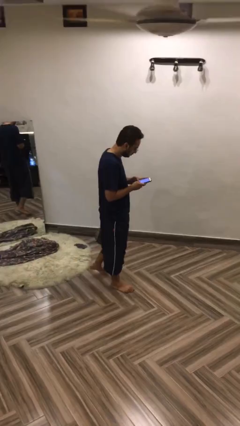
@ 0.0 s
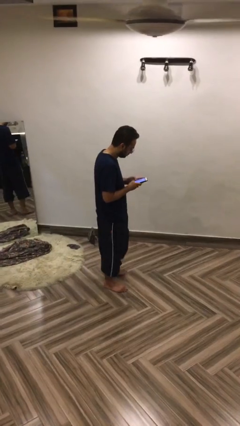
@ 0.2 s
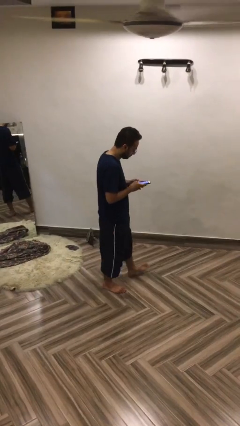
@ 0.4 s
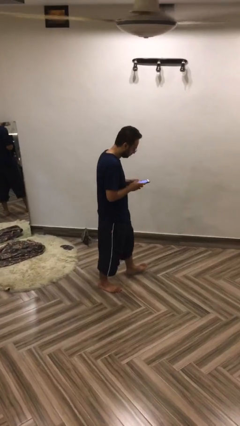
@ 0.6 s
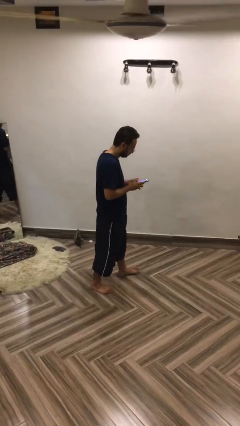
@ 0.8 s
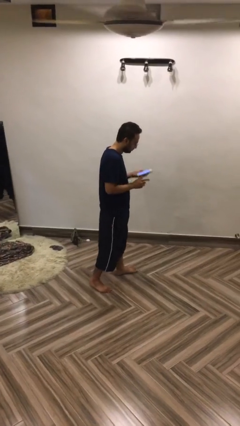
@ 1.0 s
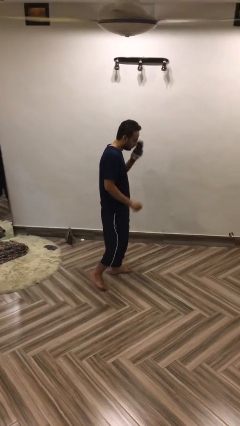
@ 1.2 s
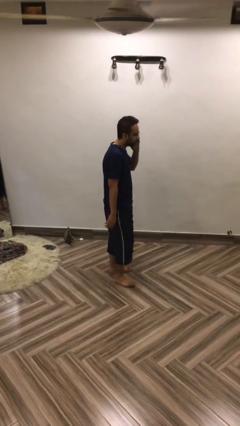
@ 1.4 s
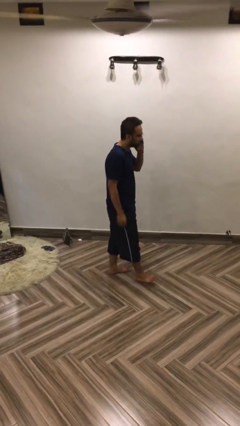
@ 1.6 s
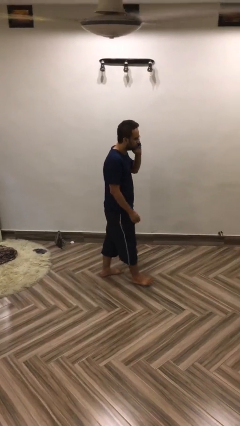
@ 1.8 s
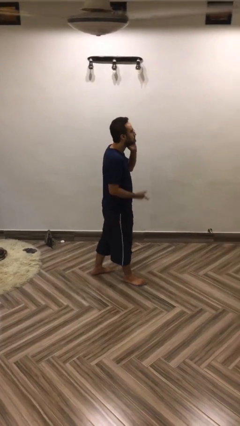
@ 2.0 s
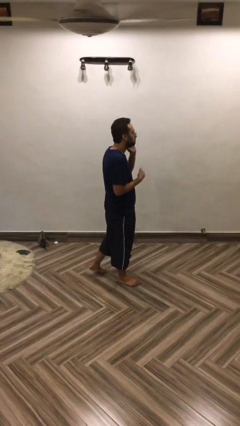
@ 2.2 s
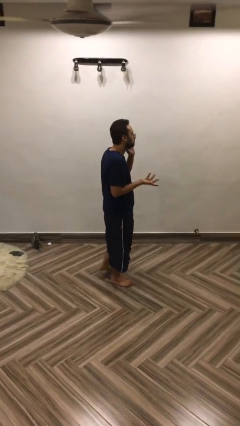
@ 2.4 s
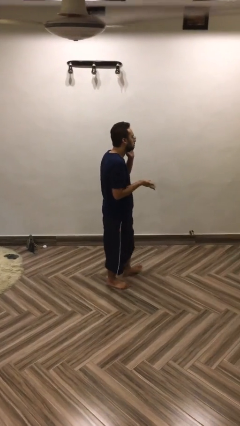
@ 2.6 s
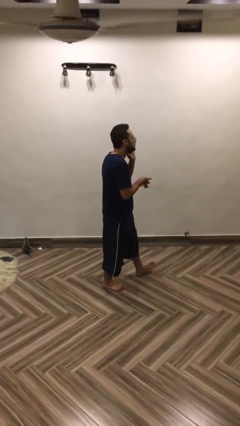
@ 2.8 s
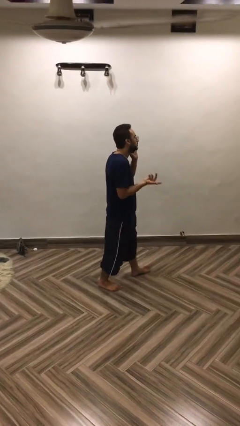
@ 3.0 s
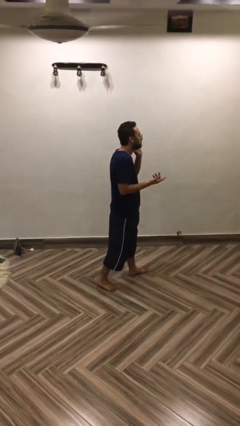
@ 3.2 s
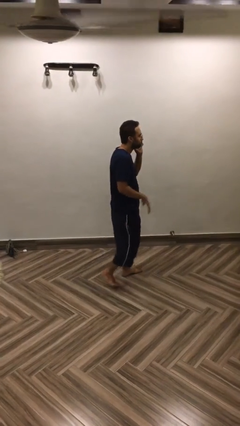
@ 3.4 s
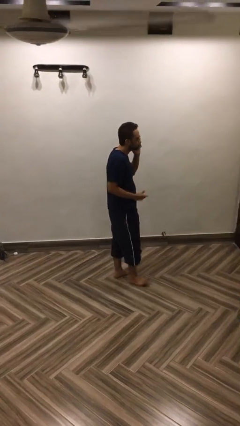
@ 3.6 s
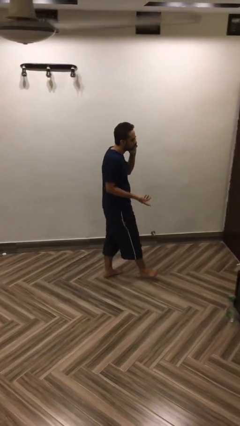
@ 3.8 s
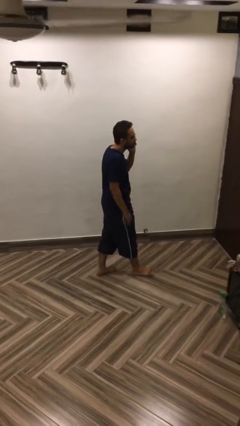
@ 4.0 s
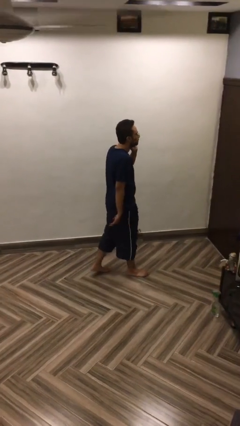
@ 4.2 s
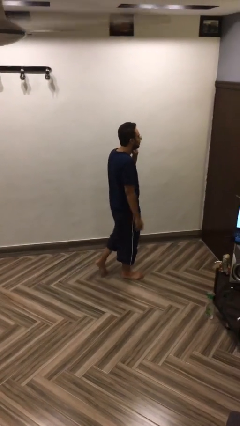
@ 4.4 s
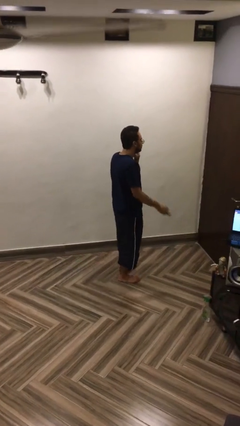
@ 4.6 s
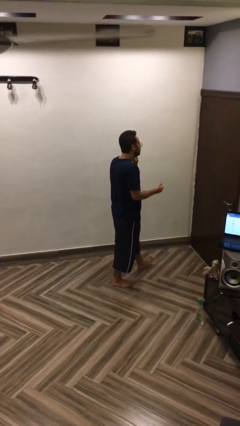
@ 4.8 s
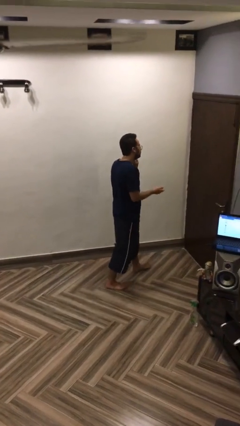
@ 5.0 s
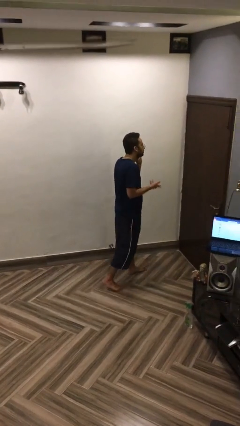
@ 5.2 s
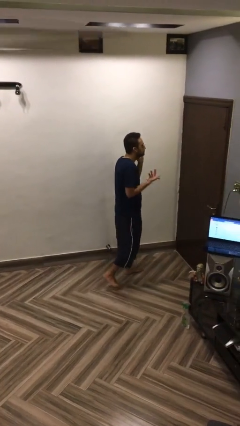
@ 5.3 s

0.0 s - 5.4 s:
person talks on phone

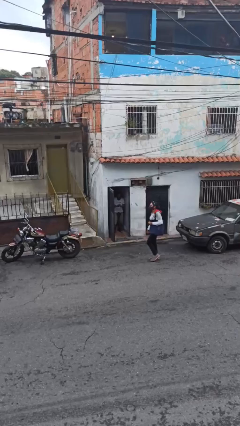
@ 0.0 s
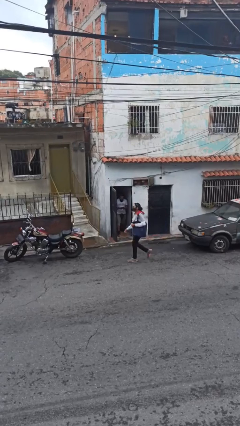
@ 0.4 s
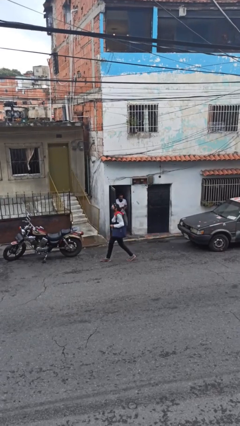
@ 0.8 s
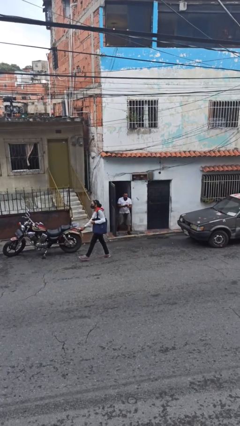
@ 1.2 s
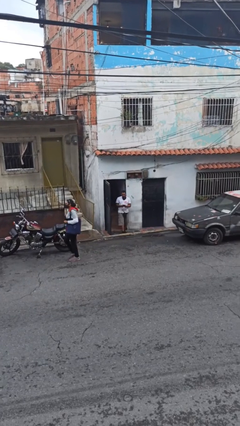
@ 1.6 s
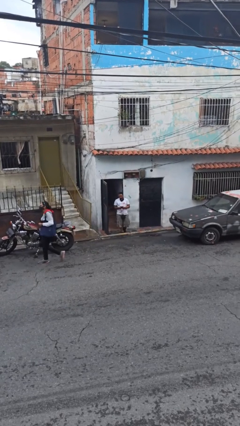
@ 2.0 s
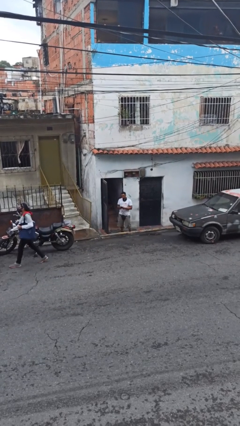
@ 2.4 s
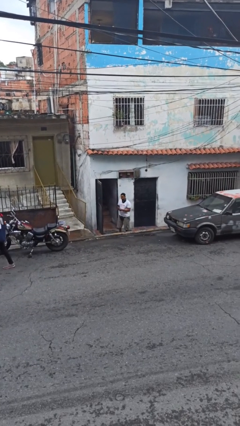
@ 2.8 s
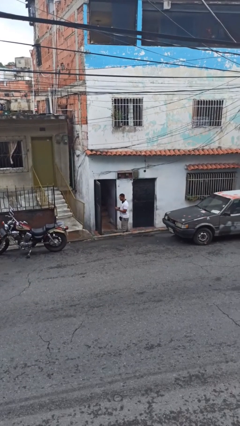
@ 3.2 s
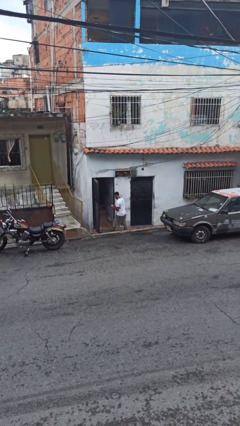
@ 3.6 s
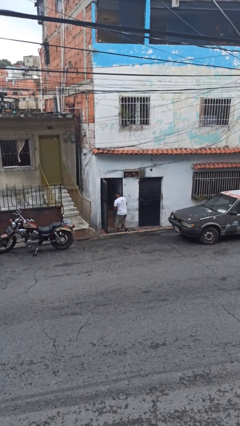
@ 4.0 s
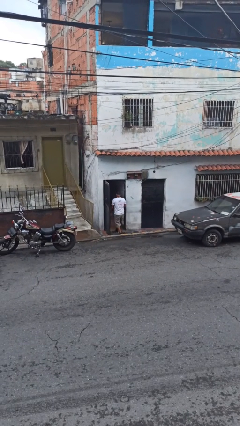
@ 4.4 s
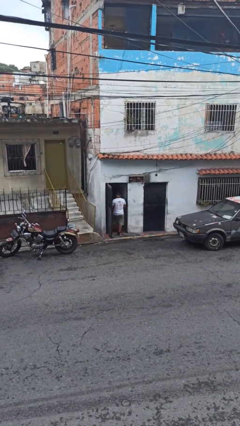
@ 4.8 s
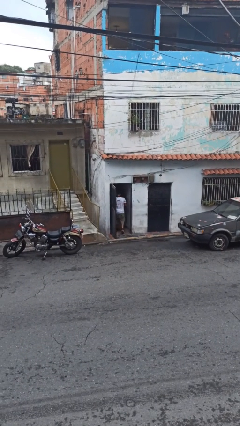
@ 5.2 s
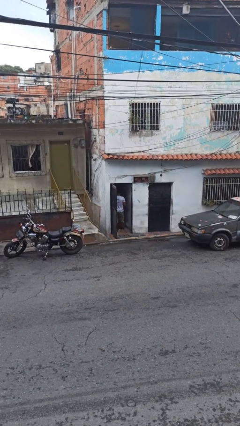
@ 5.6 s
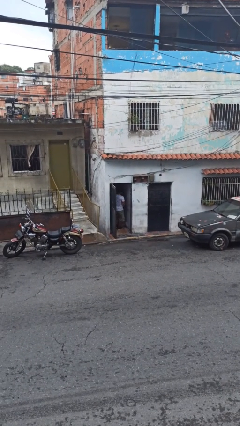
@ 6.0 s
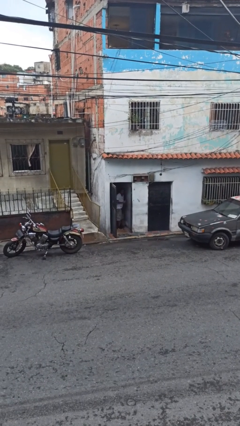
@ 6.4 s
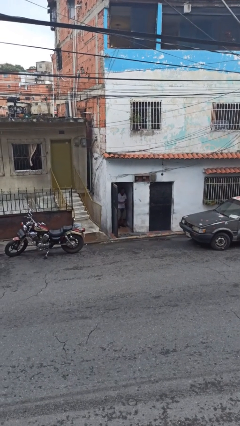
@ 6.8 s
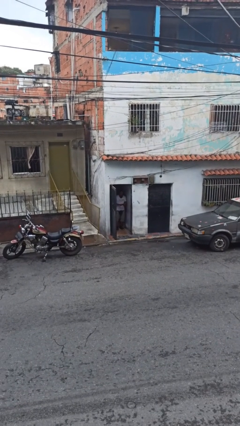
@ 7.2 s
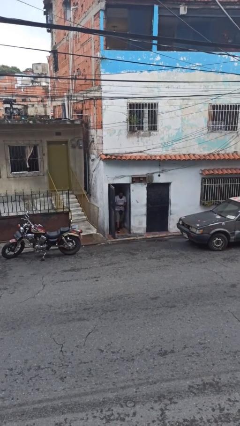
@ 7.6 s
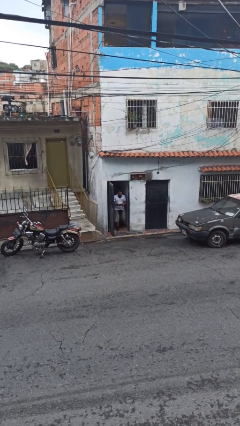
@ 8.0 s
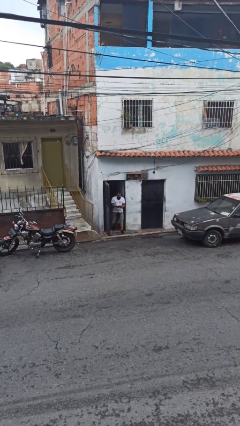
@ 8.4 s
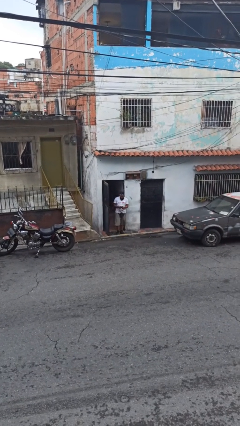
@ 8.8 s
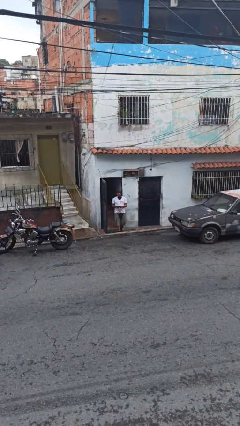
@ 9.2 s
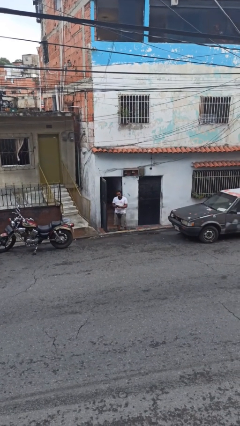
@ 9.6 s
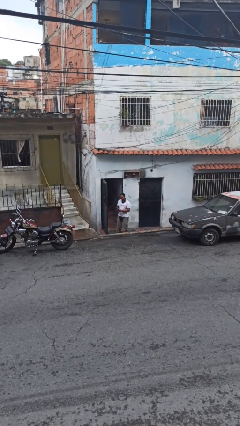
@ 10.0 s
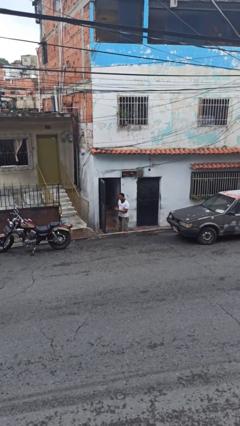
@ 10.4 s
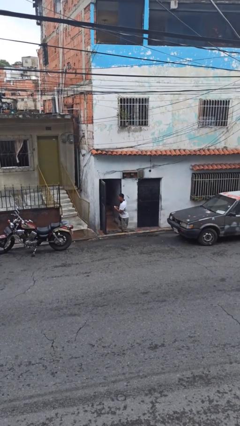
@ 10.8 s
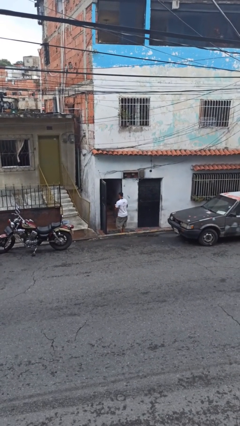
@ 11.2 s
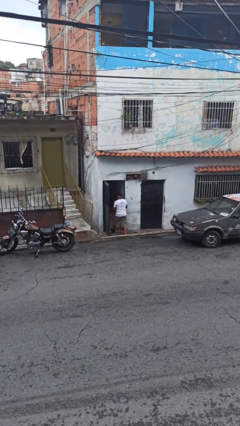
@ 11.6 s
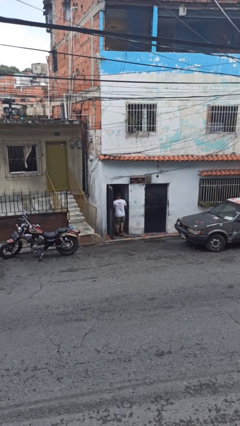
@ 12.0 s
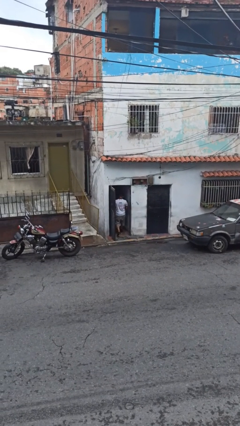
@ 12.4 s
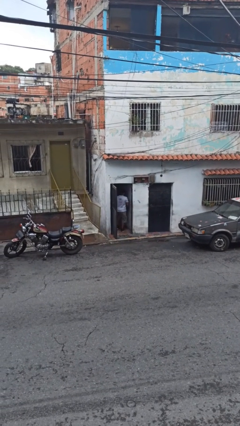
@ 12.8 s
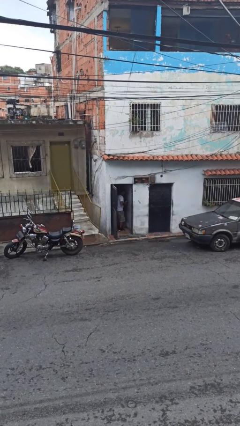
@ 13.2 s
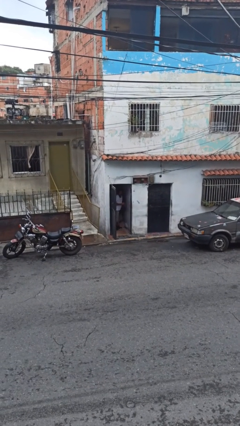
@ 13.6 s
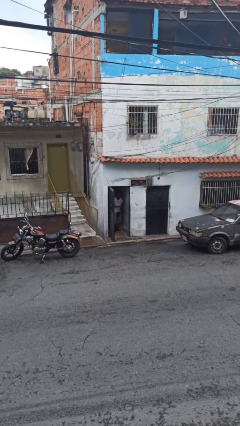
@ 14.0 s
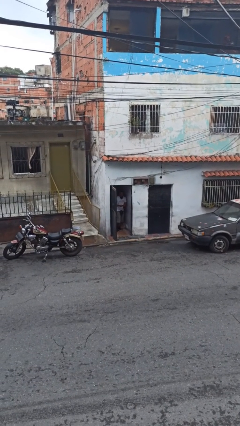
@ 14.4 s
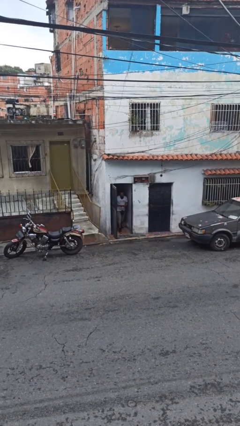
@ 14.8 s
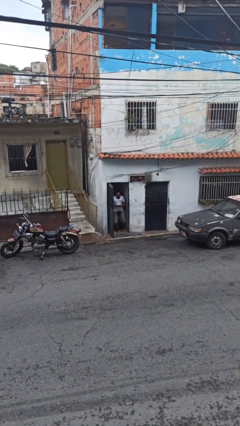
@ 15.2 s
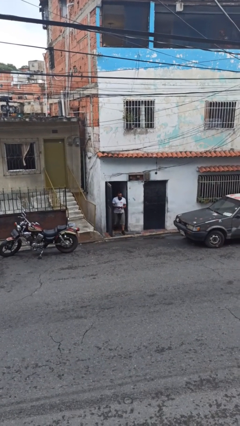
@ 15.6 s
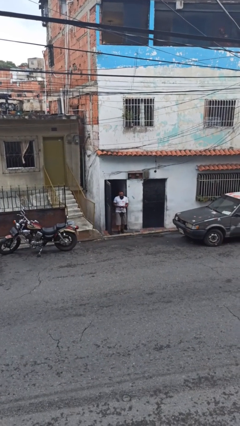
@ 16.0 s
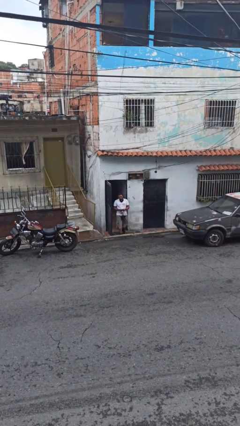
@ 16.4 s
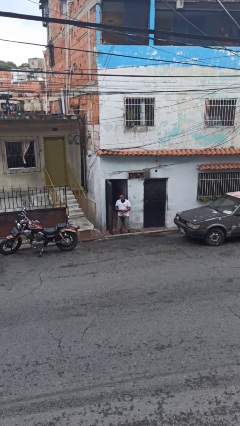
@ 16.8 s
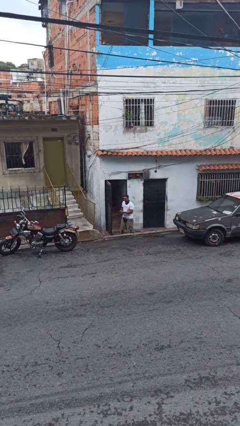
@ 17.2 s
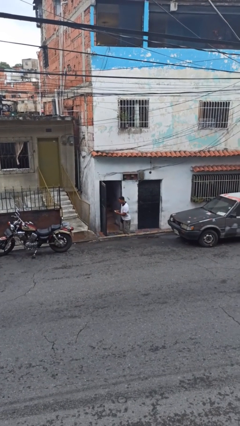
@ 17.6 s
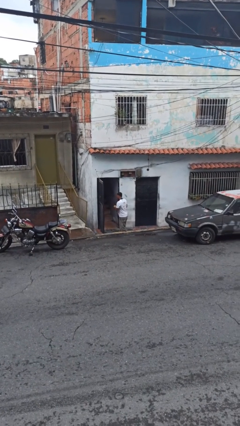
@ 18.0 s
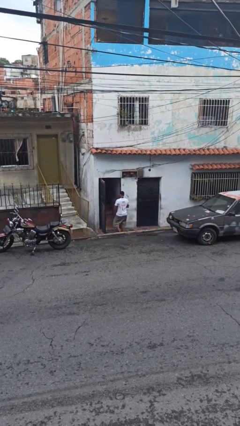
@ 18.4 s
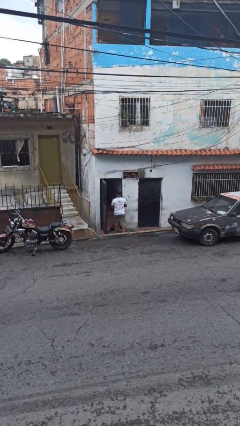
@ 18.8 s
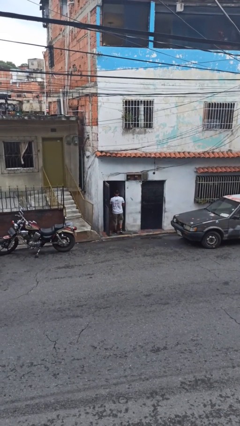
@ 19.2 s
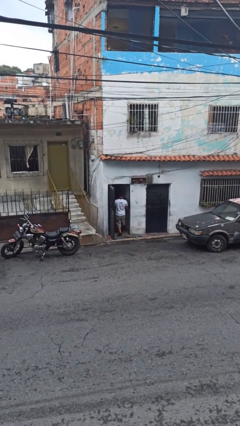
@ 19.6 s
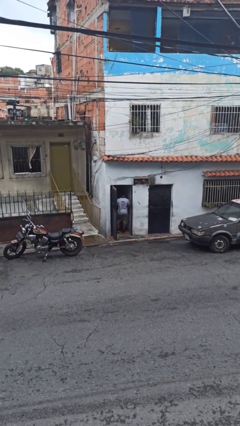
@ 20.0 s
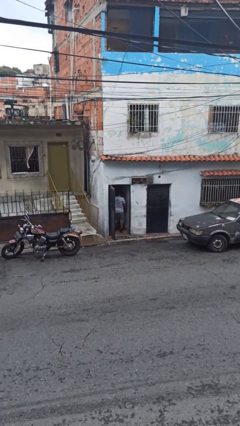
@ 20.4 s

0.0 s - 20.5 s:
person texts on phone

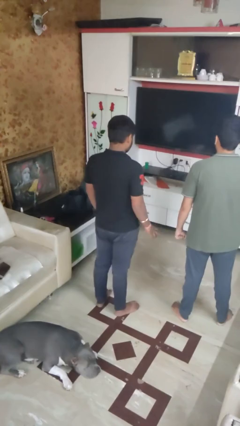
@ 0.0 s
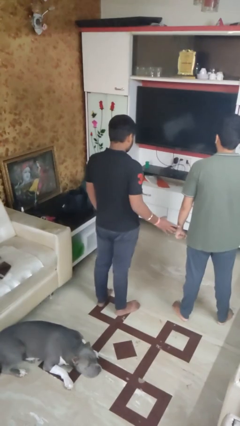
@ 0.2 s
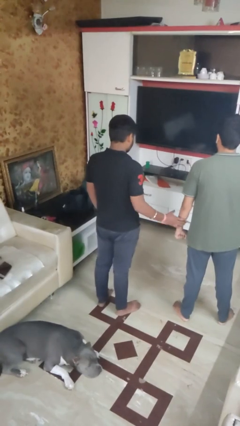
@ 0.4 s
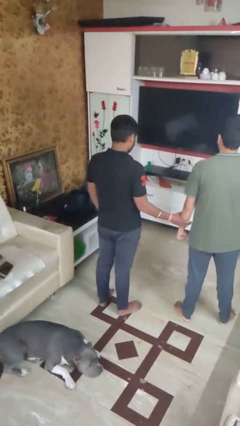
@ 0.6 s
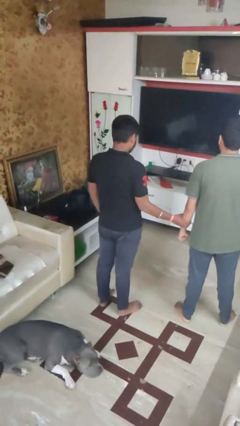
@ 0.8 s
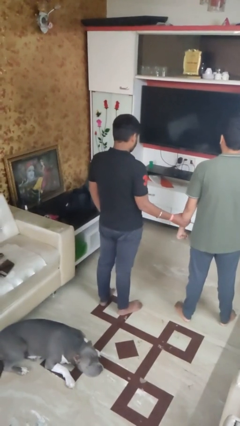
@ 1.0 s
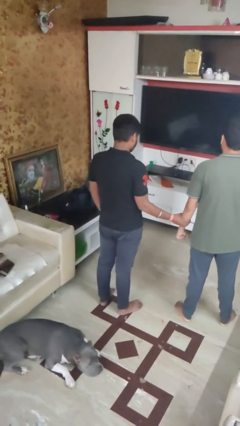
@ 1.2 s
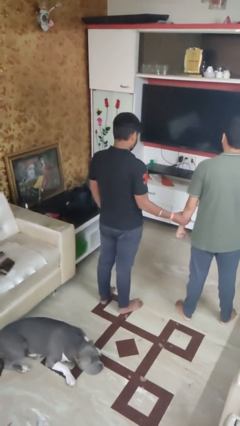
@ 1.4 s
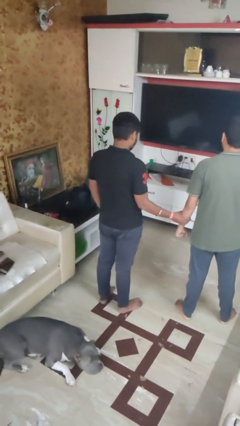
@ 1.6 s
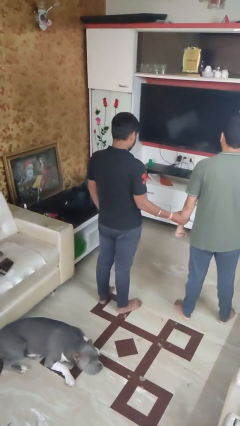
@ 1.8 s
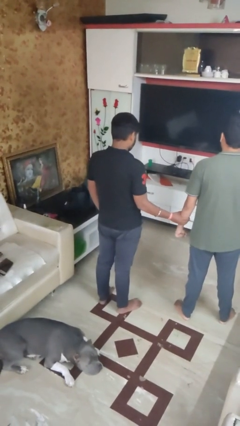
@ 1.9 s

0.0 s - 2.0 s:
person grabs person by forearm

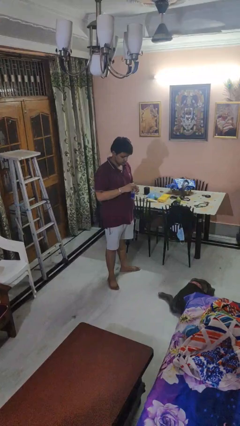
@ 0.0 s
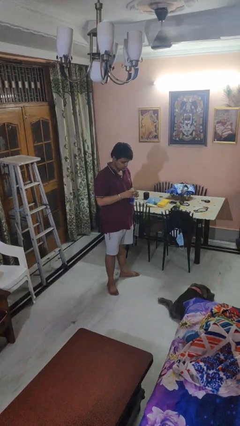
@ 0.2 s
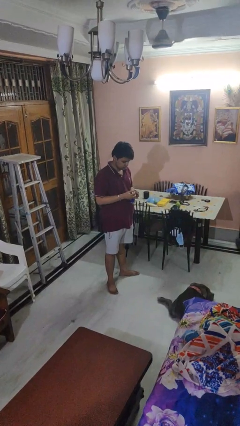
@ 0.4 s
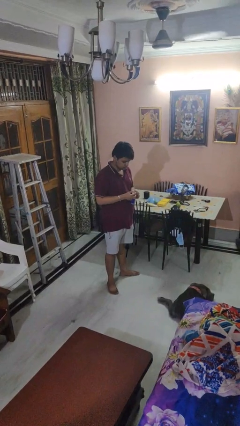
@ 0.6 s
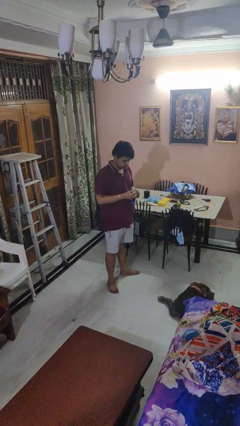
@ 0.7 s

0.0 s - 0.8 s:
person opens beverage can
